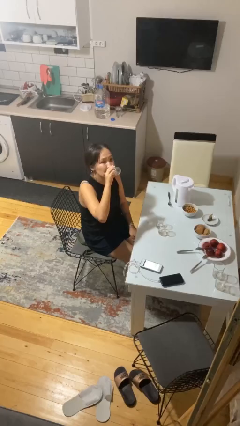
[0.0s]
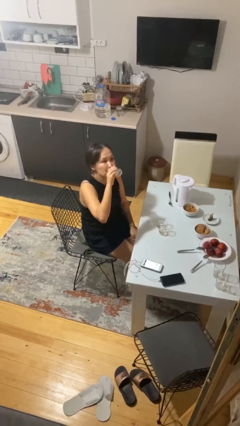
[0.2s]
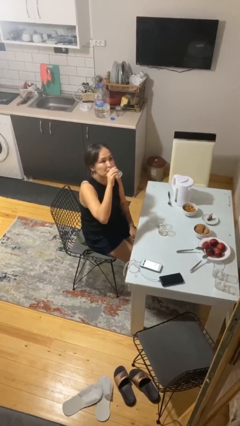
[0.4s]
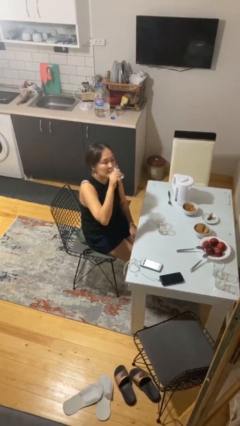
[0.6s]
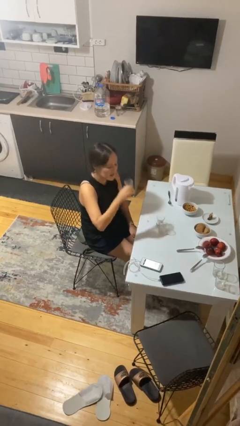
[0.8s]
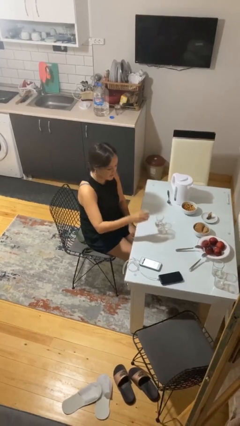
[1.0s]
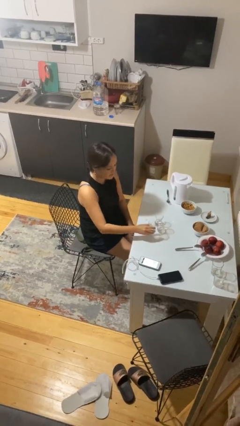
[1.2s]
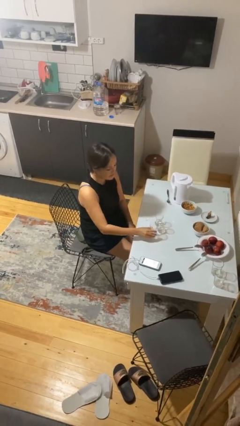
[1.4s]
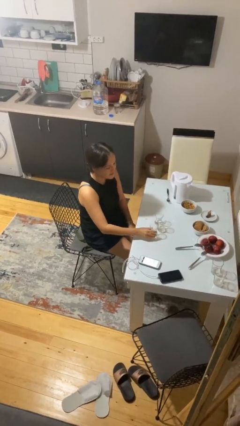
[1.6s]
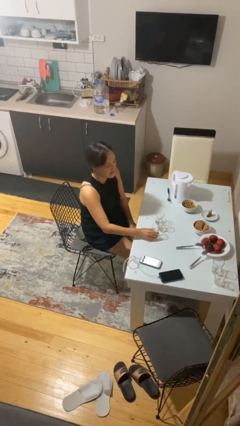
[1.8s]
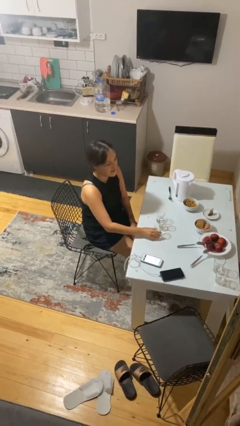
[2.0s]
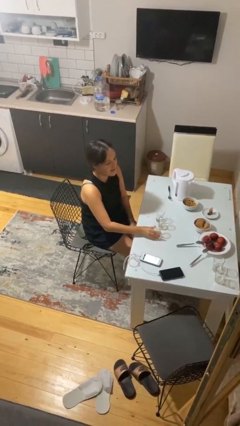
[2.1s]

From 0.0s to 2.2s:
person puts down object on table

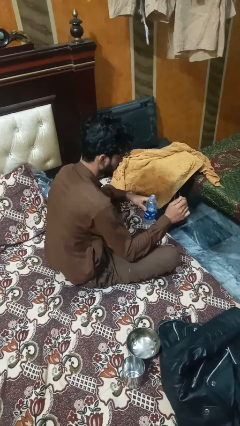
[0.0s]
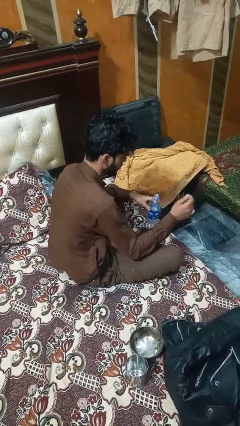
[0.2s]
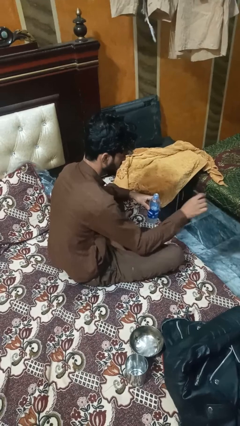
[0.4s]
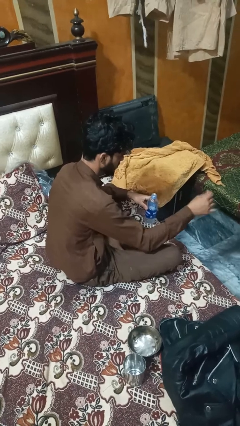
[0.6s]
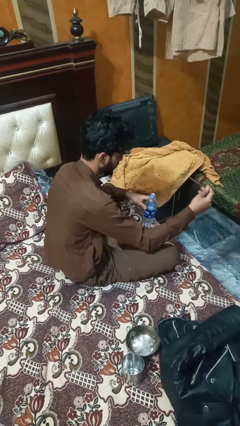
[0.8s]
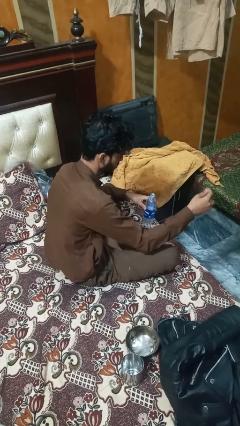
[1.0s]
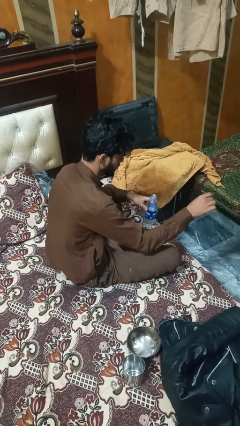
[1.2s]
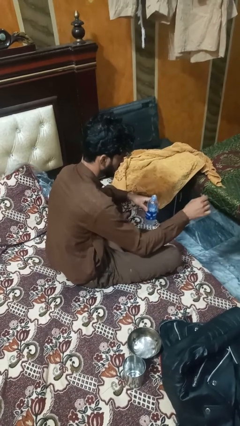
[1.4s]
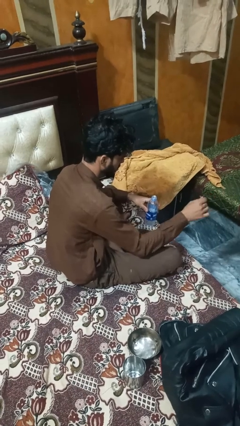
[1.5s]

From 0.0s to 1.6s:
person pours liquid into cup

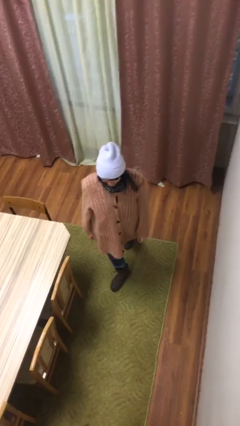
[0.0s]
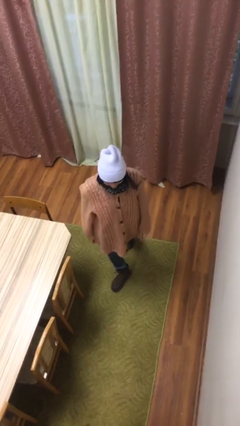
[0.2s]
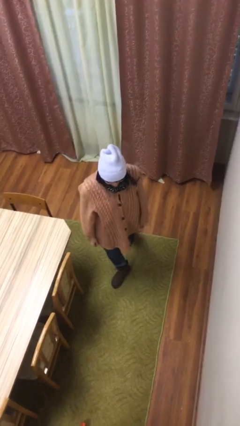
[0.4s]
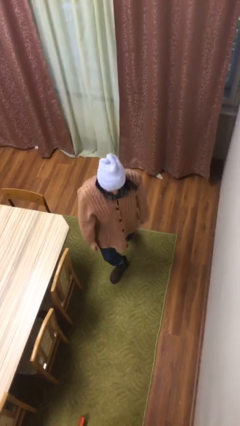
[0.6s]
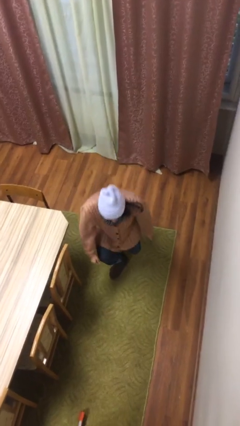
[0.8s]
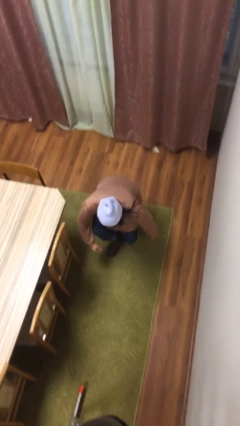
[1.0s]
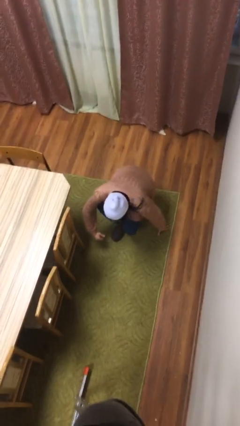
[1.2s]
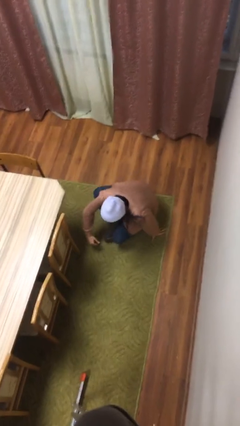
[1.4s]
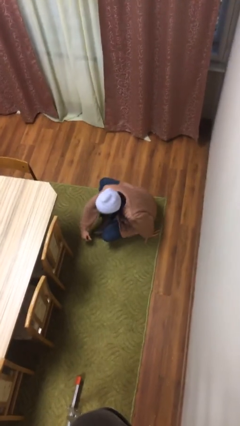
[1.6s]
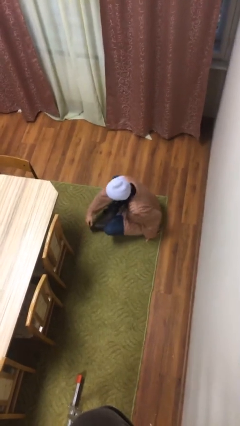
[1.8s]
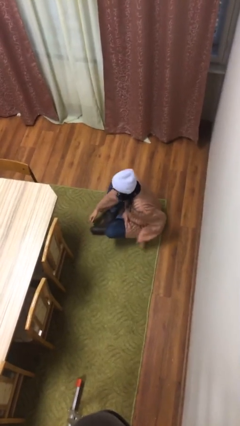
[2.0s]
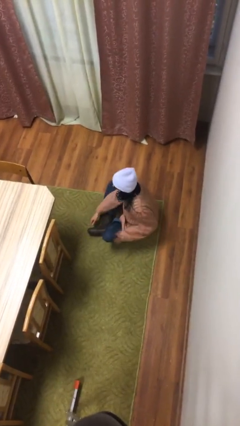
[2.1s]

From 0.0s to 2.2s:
person sits down

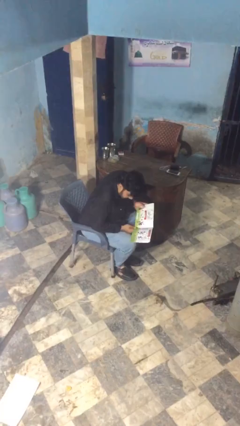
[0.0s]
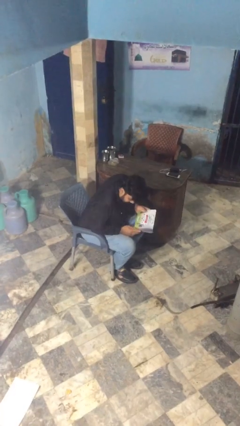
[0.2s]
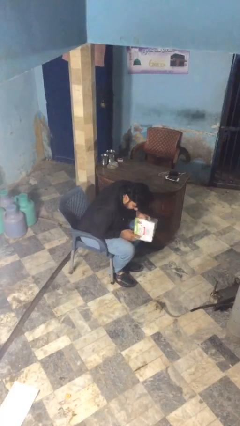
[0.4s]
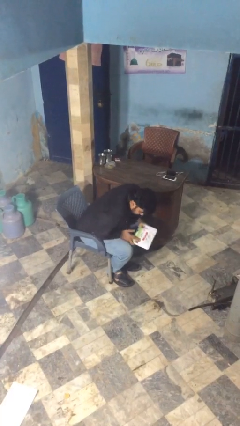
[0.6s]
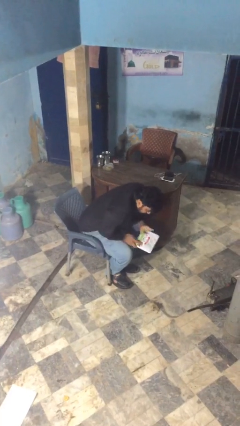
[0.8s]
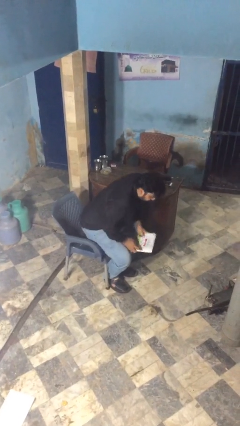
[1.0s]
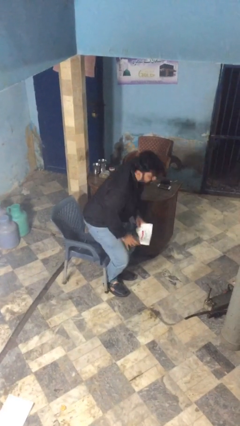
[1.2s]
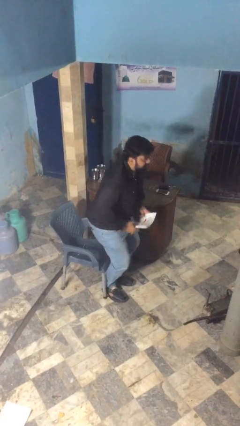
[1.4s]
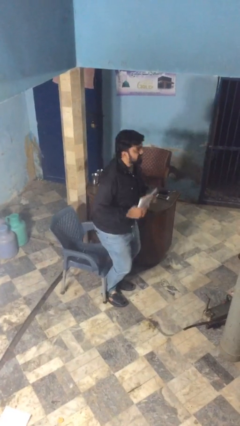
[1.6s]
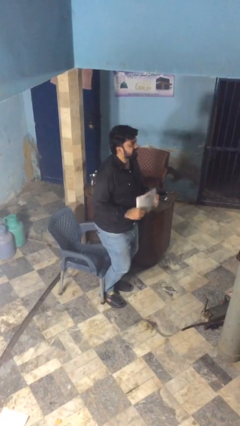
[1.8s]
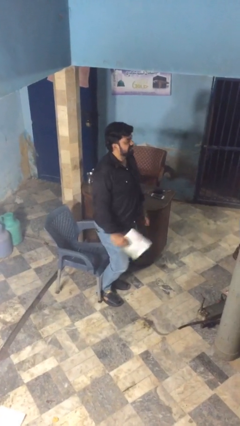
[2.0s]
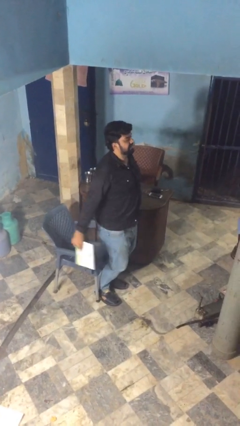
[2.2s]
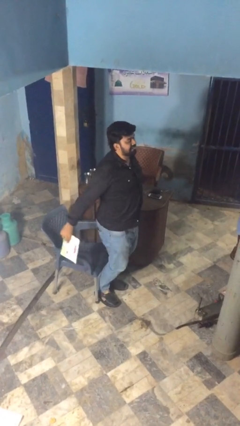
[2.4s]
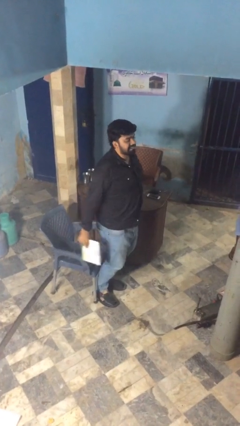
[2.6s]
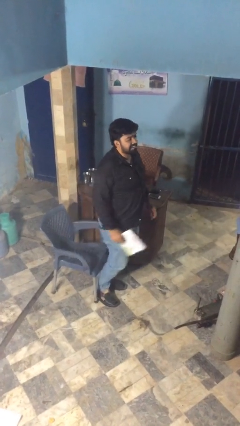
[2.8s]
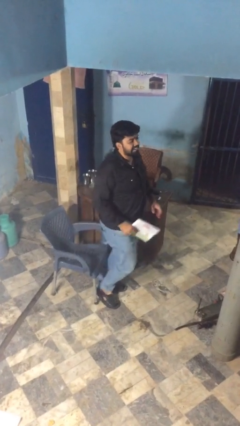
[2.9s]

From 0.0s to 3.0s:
person stands up

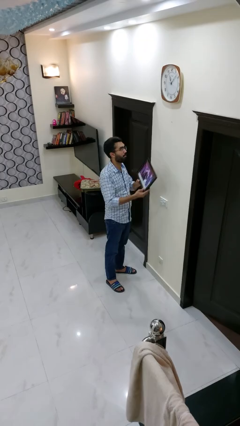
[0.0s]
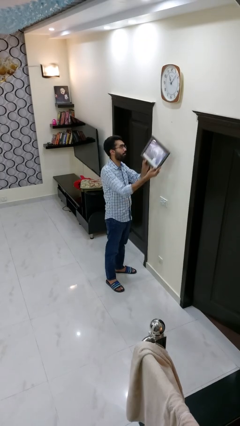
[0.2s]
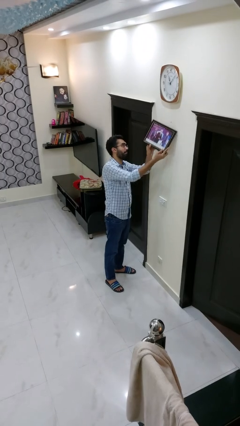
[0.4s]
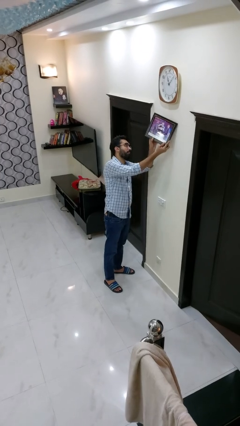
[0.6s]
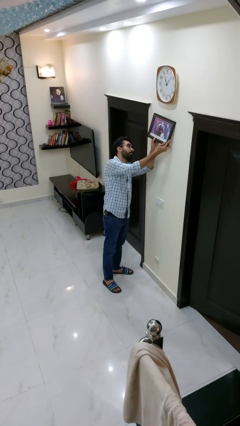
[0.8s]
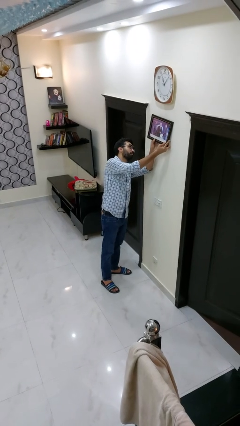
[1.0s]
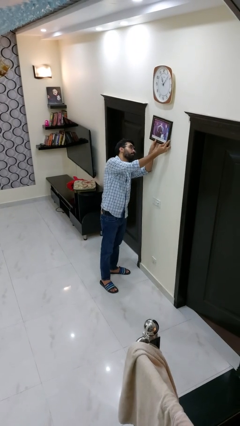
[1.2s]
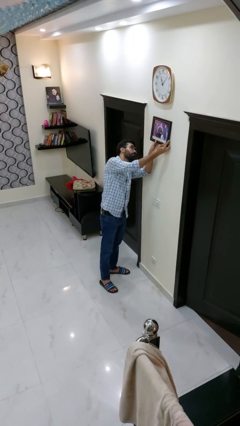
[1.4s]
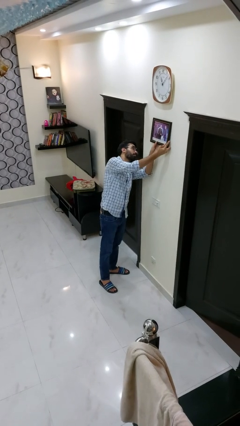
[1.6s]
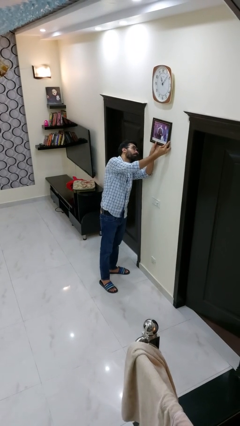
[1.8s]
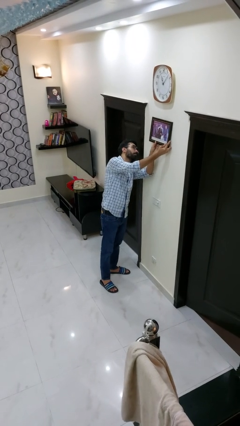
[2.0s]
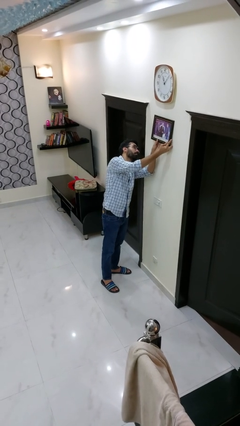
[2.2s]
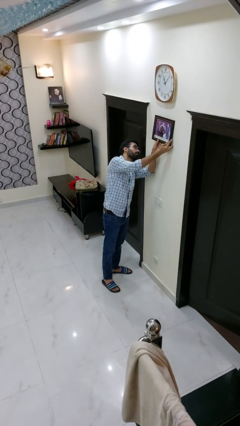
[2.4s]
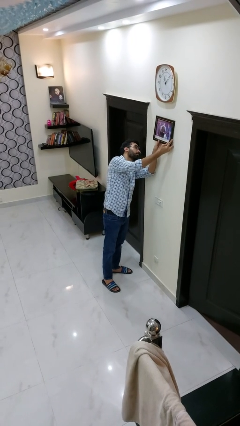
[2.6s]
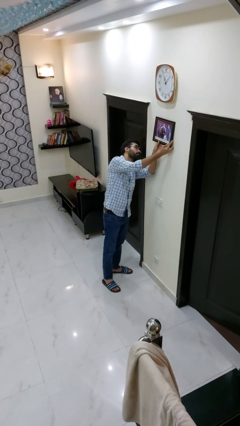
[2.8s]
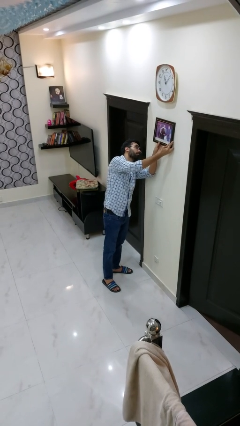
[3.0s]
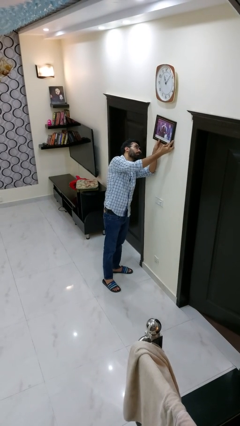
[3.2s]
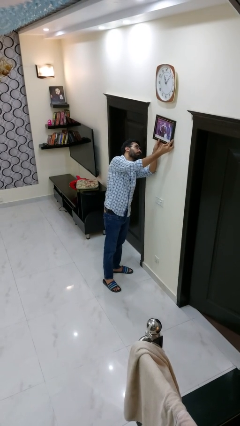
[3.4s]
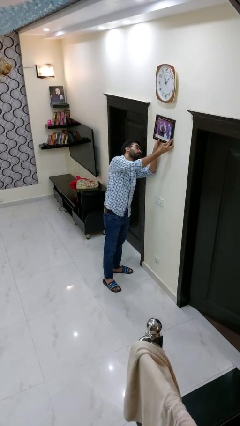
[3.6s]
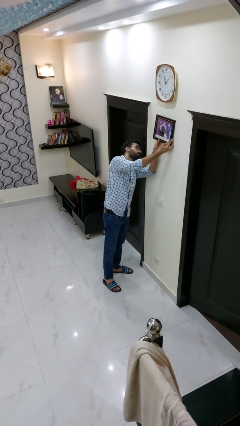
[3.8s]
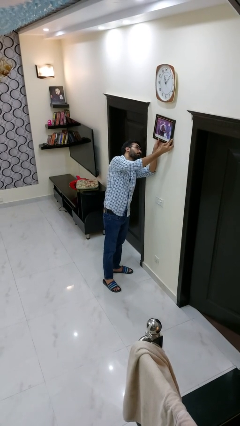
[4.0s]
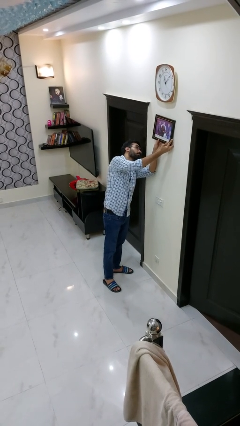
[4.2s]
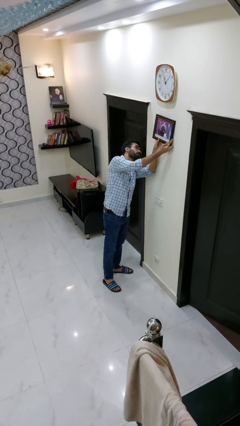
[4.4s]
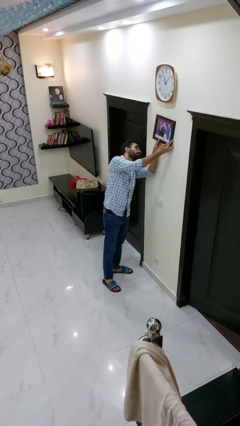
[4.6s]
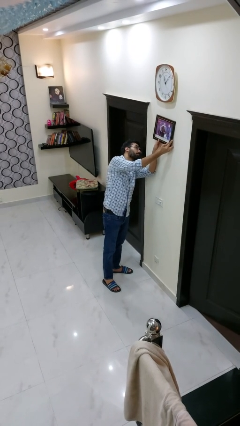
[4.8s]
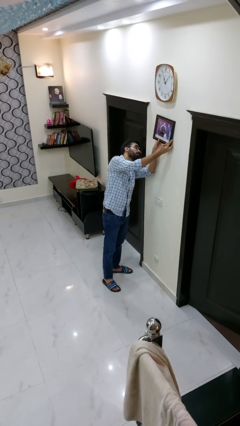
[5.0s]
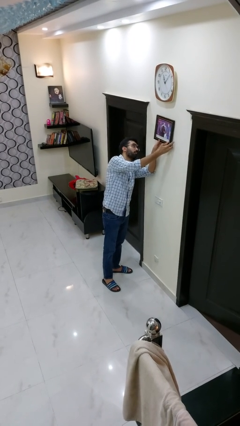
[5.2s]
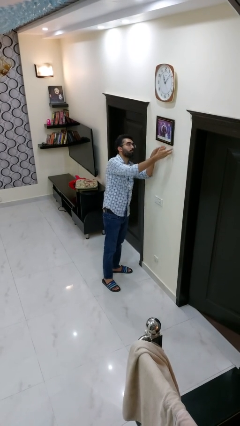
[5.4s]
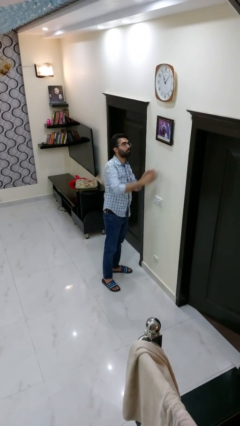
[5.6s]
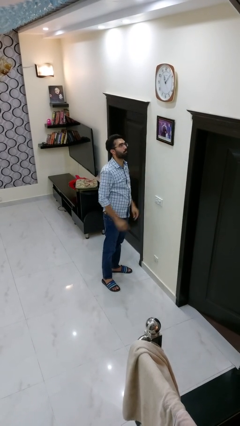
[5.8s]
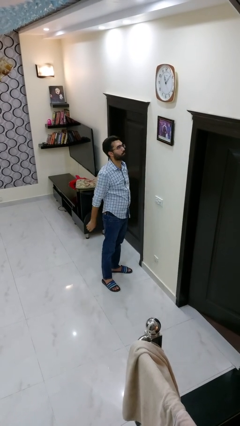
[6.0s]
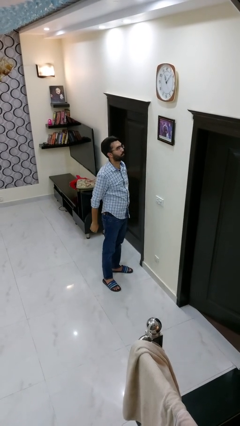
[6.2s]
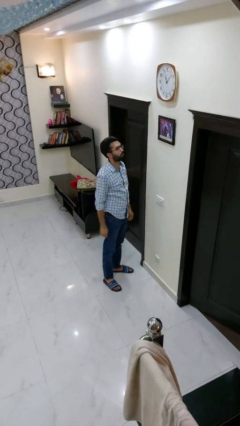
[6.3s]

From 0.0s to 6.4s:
person puts up picture frame

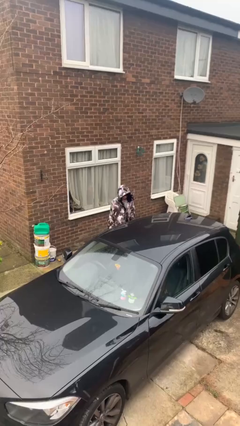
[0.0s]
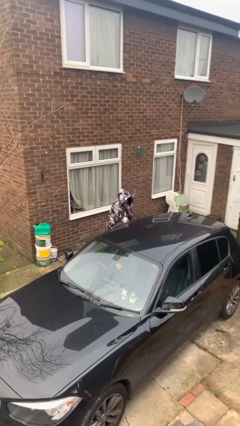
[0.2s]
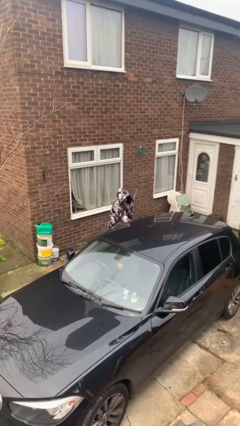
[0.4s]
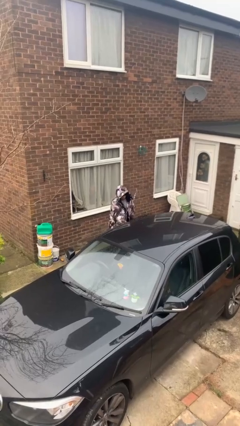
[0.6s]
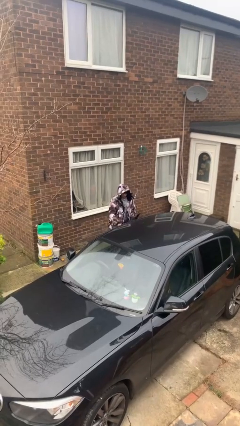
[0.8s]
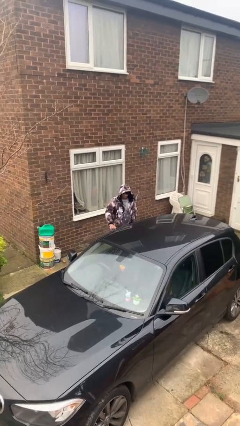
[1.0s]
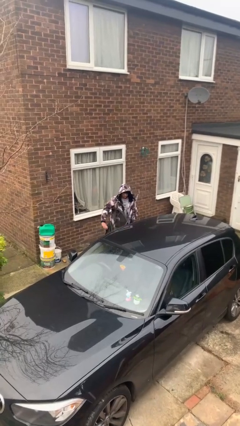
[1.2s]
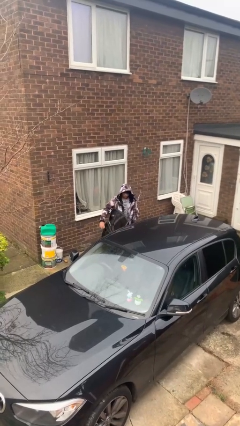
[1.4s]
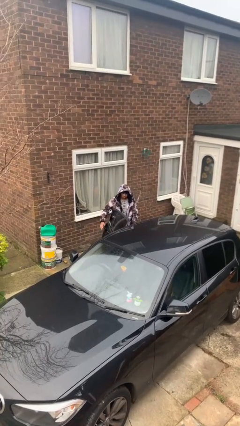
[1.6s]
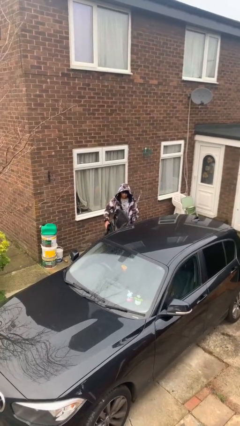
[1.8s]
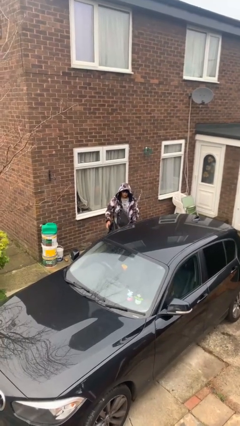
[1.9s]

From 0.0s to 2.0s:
person opens car door
